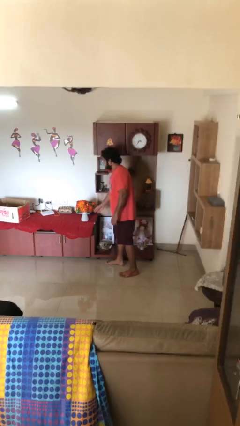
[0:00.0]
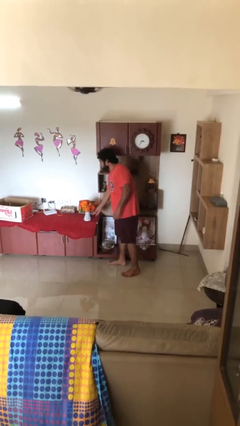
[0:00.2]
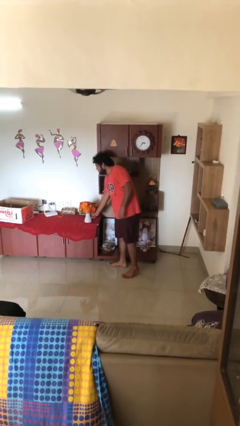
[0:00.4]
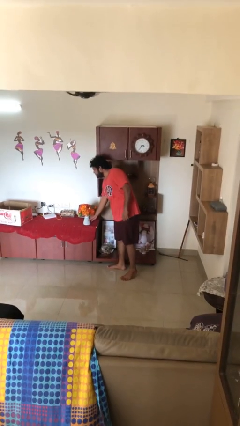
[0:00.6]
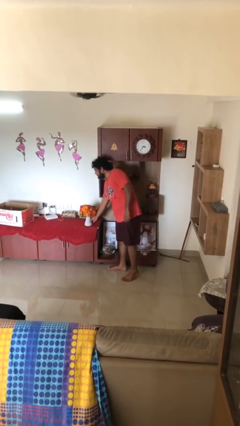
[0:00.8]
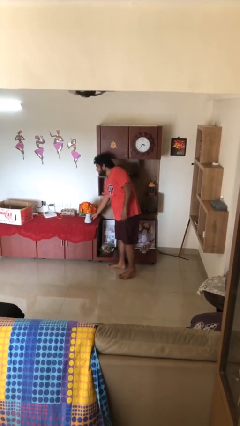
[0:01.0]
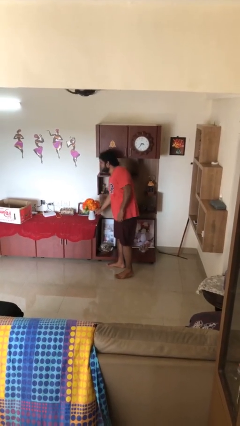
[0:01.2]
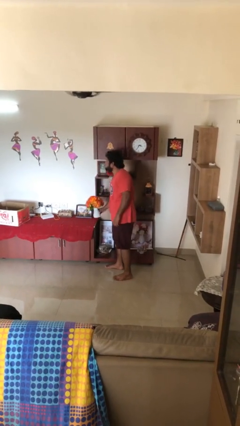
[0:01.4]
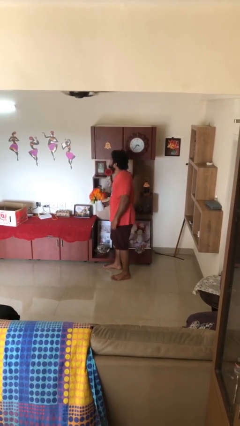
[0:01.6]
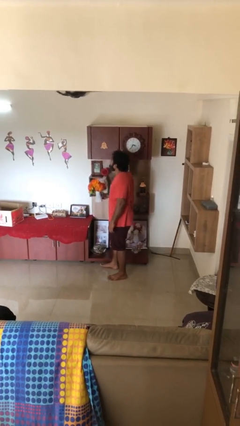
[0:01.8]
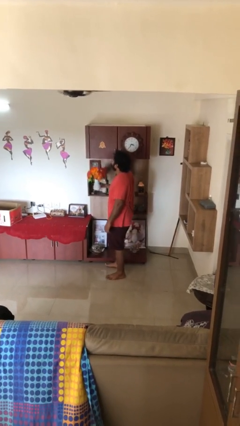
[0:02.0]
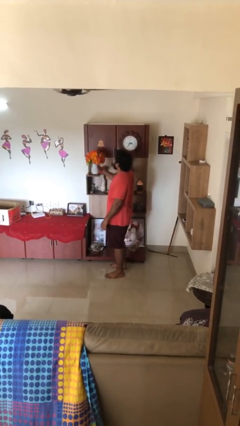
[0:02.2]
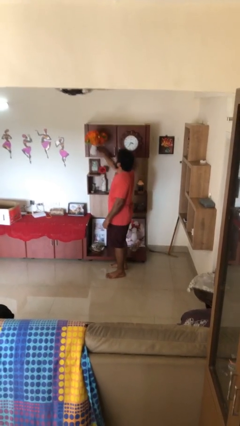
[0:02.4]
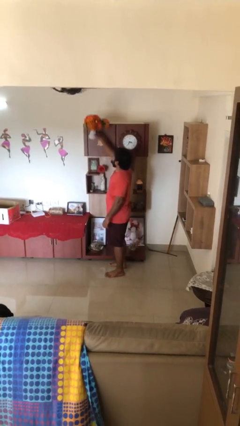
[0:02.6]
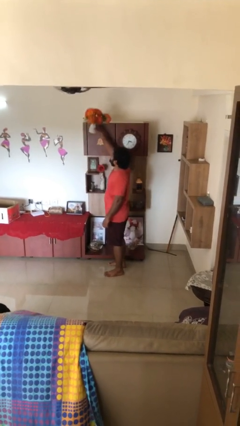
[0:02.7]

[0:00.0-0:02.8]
person picks up object from table

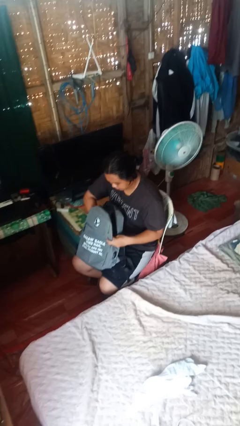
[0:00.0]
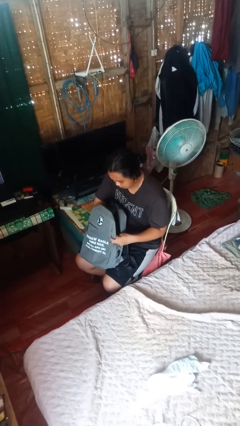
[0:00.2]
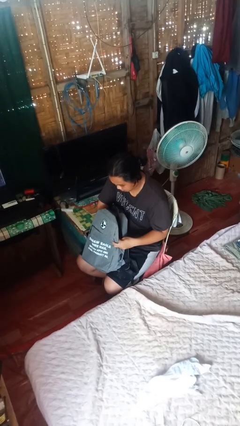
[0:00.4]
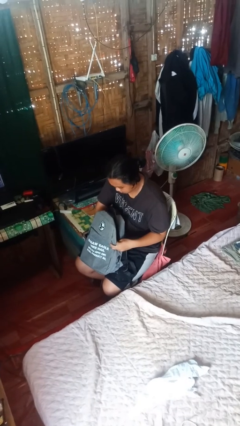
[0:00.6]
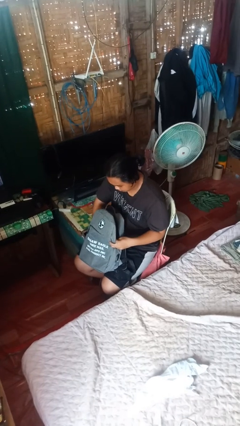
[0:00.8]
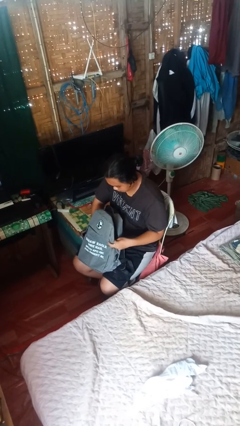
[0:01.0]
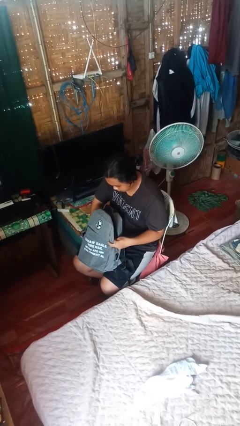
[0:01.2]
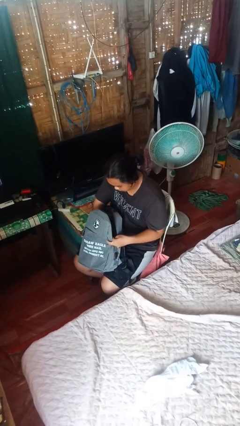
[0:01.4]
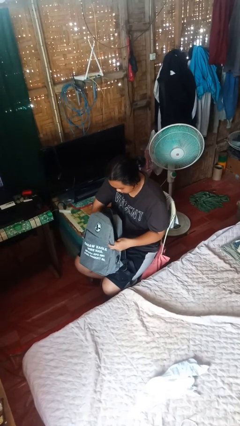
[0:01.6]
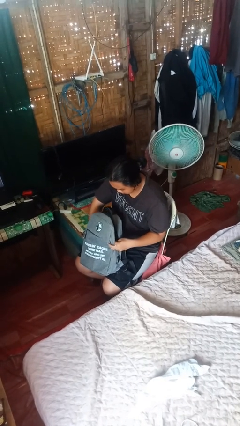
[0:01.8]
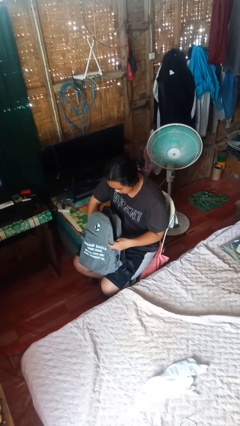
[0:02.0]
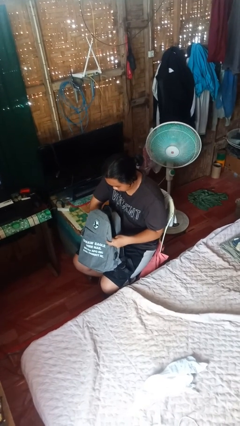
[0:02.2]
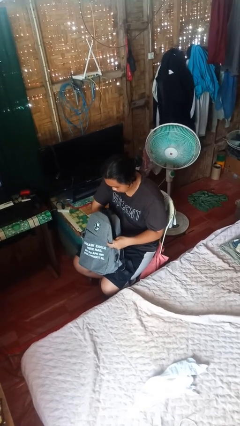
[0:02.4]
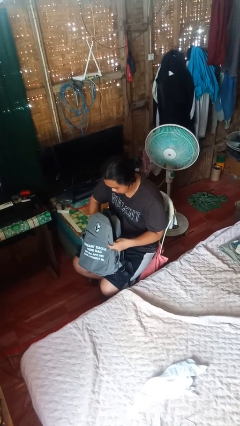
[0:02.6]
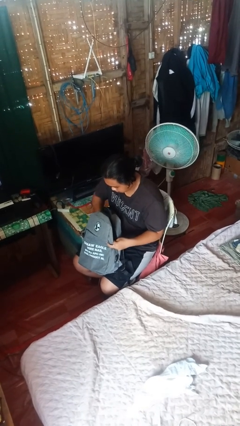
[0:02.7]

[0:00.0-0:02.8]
person searches in backpack

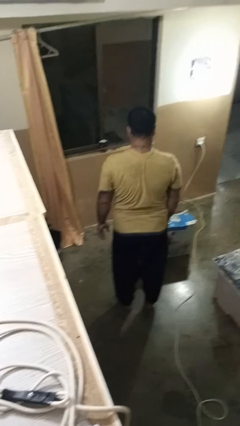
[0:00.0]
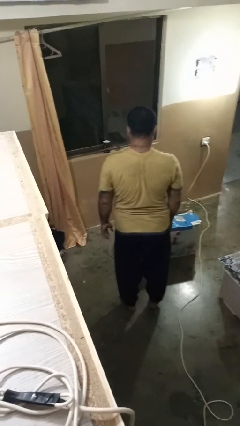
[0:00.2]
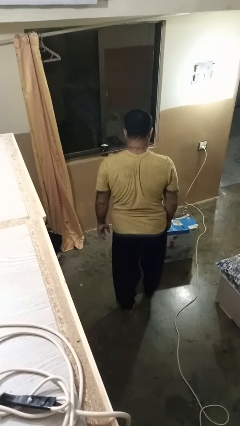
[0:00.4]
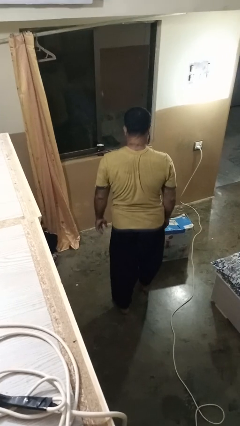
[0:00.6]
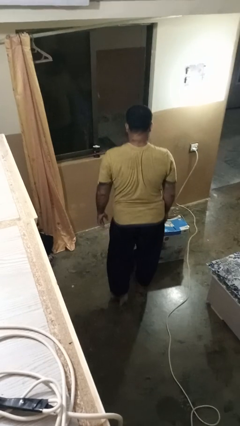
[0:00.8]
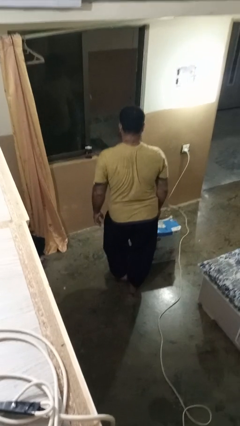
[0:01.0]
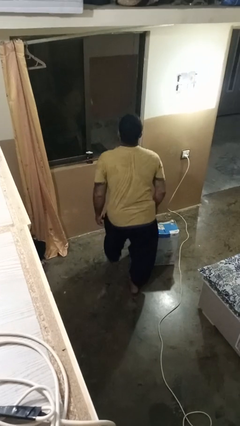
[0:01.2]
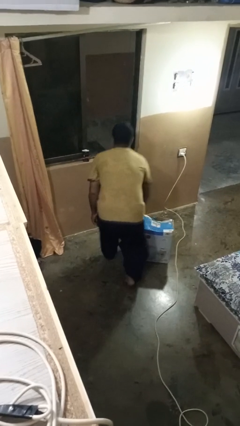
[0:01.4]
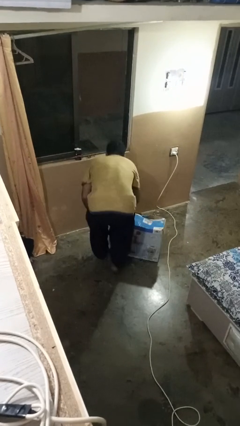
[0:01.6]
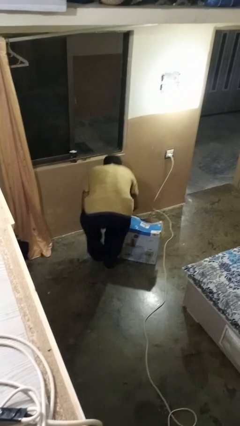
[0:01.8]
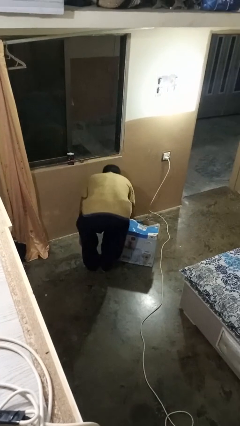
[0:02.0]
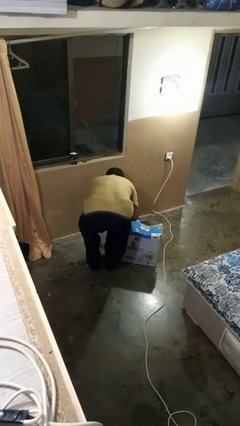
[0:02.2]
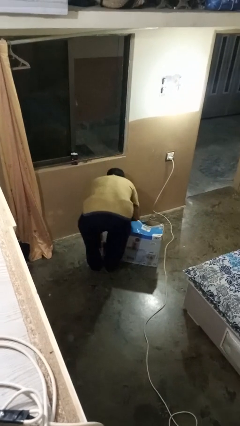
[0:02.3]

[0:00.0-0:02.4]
person trips on object on floor

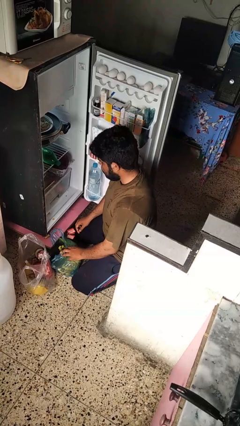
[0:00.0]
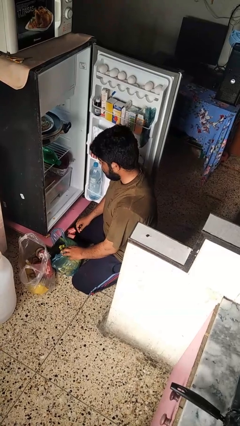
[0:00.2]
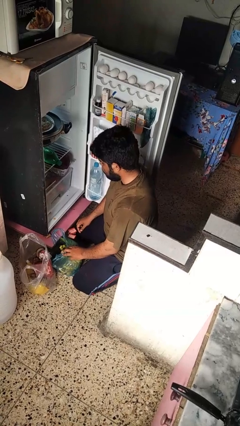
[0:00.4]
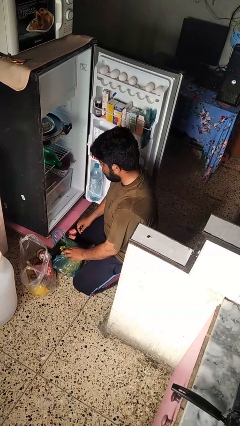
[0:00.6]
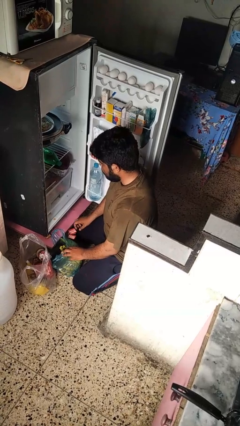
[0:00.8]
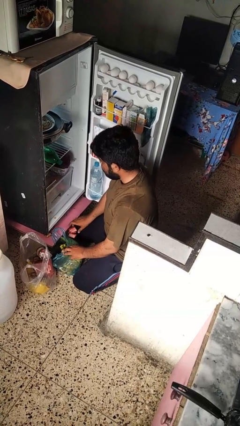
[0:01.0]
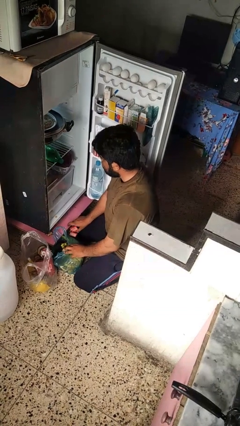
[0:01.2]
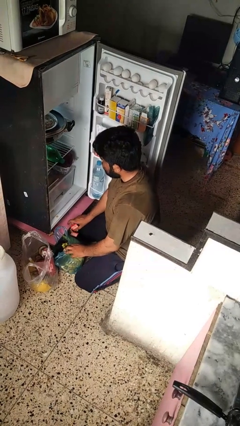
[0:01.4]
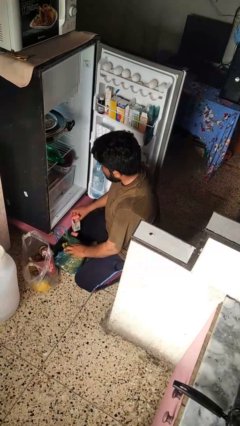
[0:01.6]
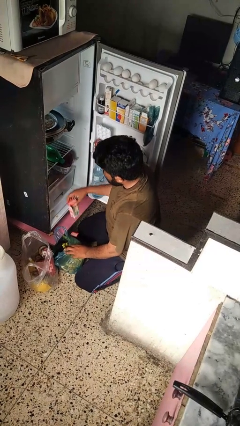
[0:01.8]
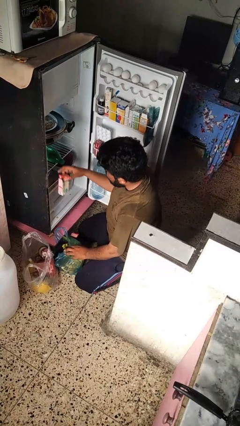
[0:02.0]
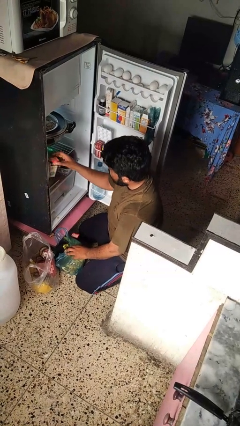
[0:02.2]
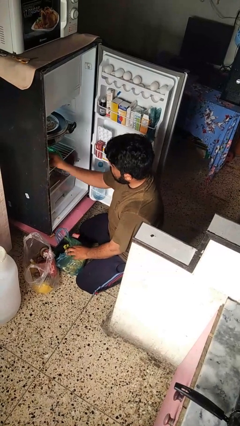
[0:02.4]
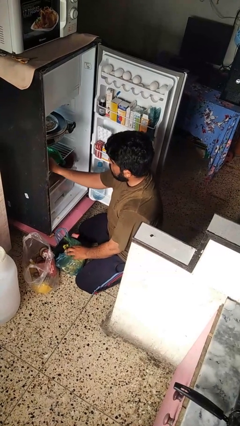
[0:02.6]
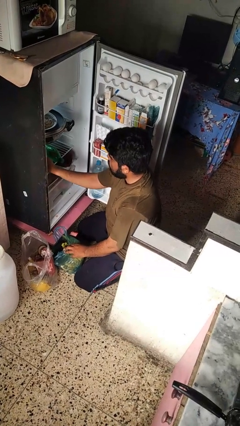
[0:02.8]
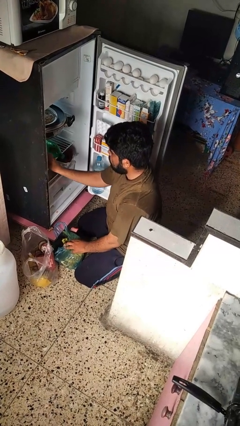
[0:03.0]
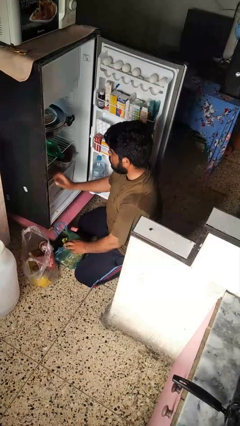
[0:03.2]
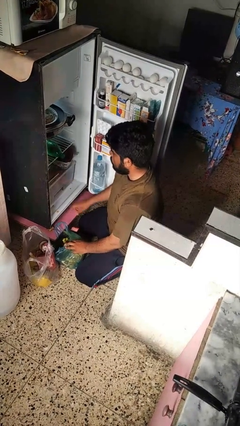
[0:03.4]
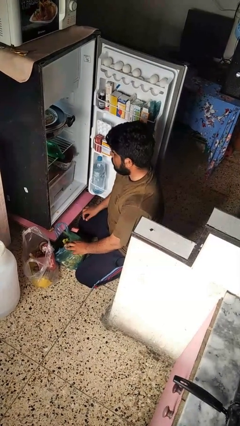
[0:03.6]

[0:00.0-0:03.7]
person loads groceries into refrigerator

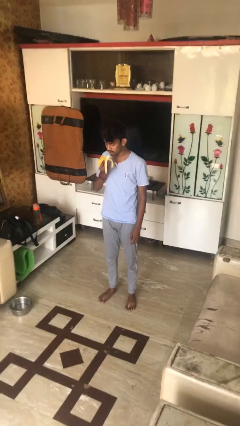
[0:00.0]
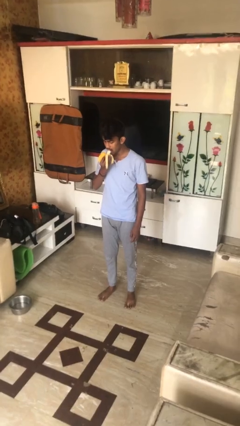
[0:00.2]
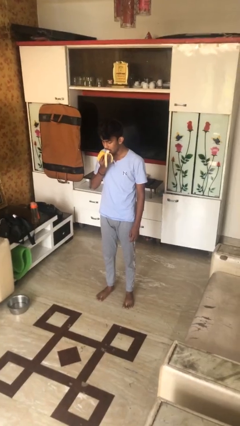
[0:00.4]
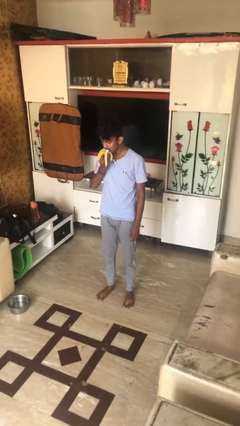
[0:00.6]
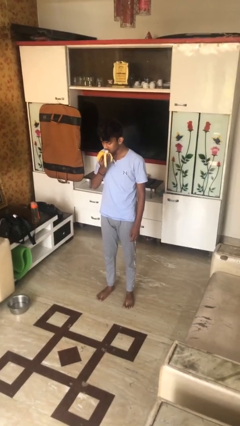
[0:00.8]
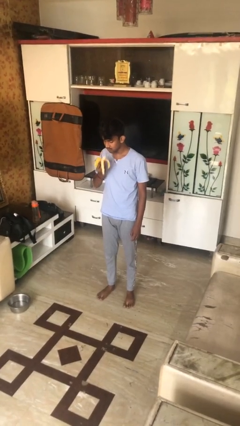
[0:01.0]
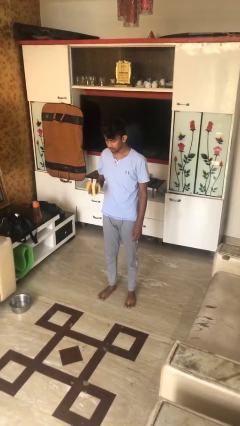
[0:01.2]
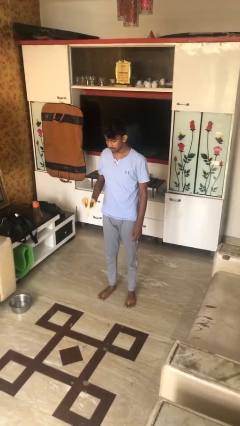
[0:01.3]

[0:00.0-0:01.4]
person eats banana

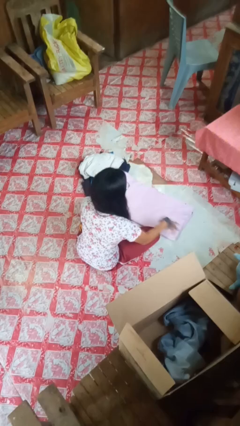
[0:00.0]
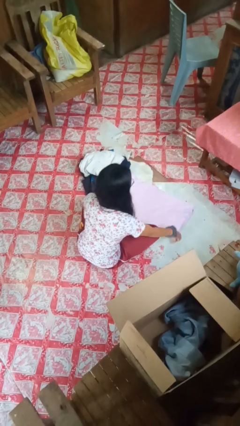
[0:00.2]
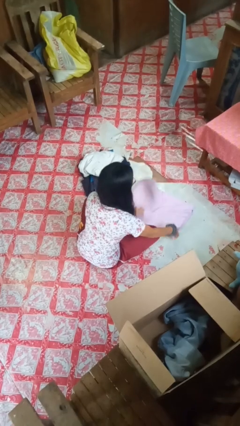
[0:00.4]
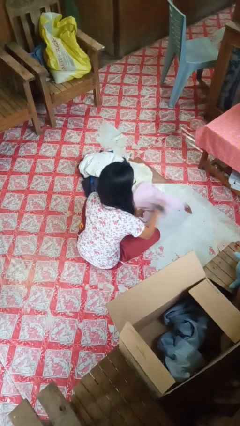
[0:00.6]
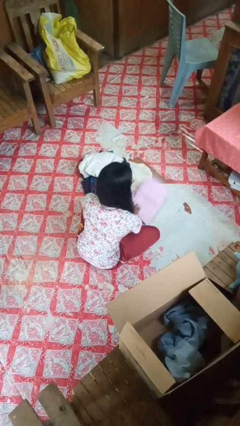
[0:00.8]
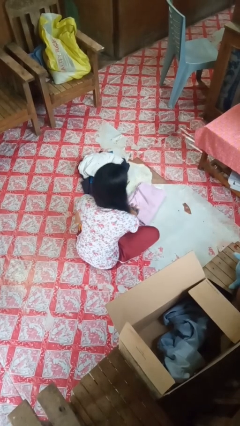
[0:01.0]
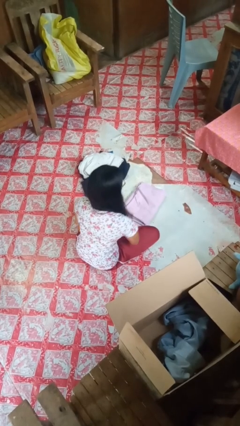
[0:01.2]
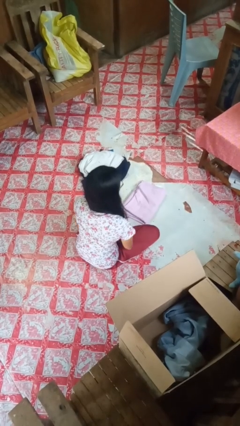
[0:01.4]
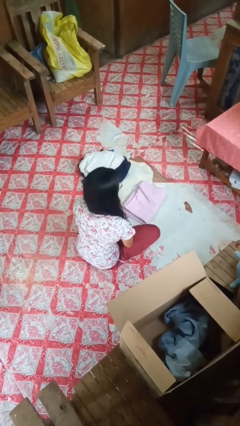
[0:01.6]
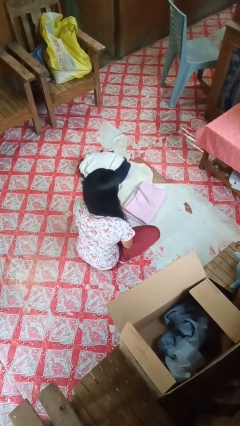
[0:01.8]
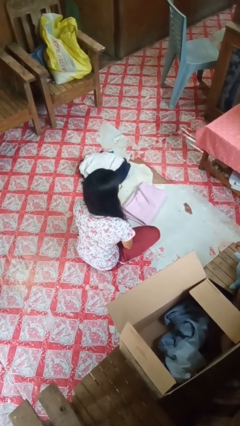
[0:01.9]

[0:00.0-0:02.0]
person folds towel

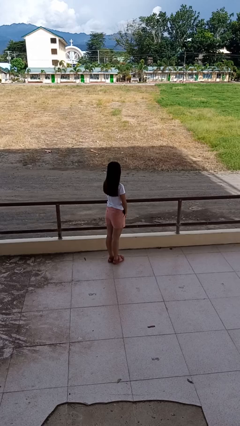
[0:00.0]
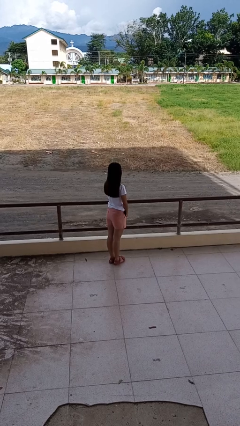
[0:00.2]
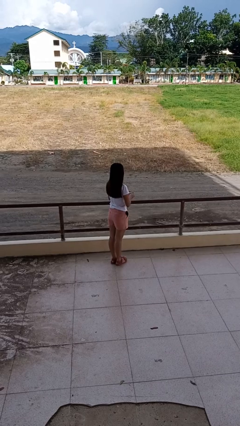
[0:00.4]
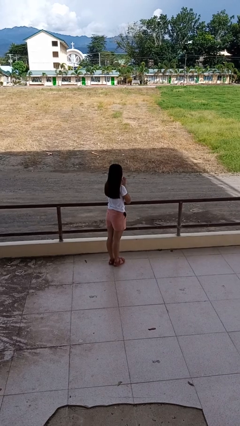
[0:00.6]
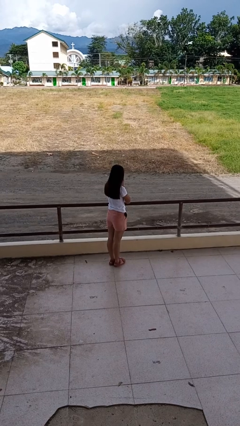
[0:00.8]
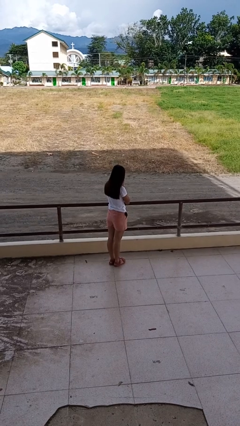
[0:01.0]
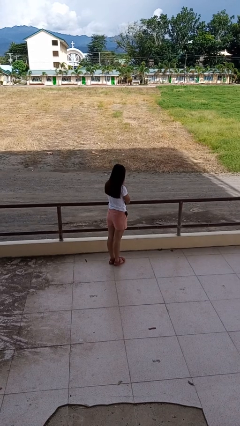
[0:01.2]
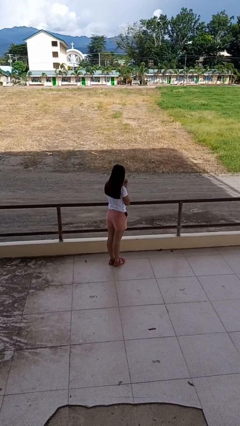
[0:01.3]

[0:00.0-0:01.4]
person sneezes into hand

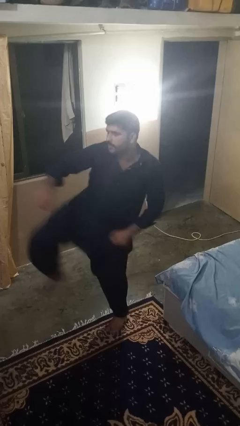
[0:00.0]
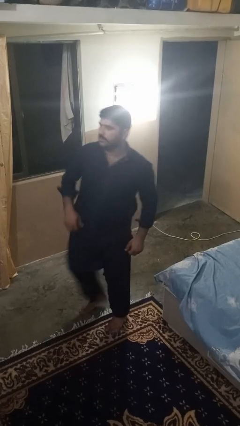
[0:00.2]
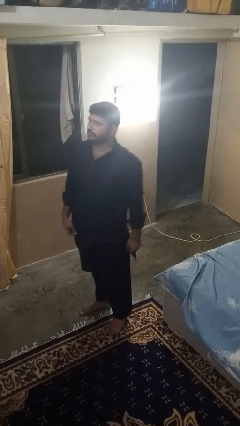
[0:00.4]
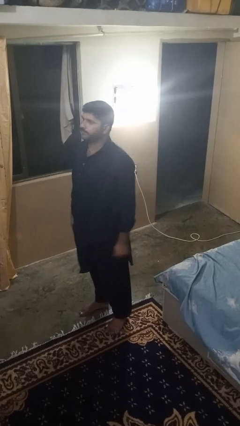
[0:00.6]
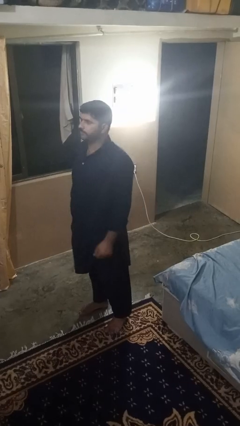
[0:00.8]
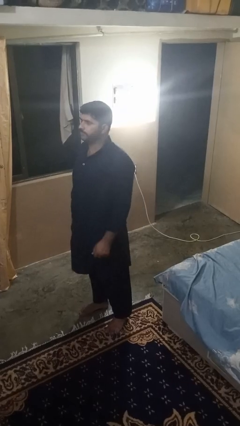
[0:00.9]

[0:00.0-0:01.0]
person karate kicks
